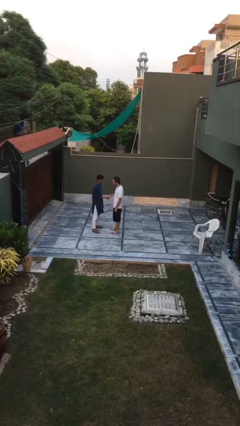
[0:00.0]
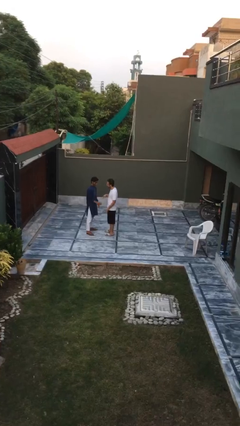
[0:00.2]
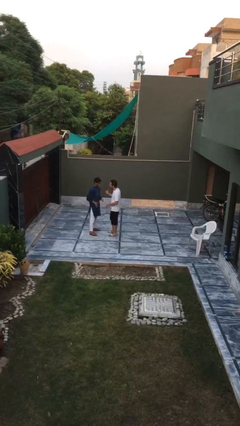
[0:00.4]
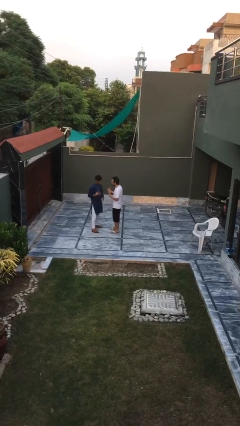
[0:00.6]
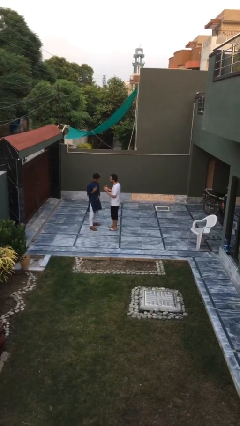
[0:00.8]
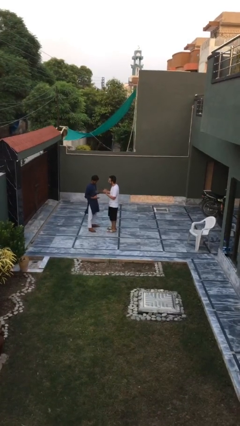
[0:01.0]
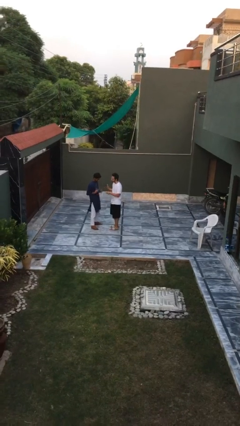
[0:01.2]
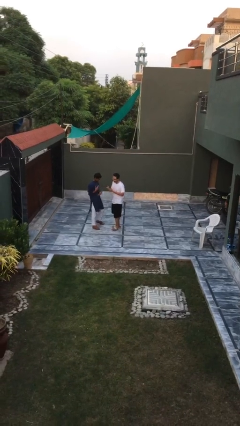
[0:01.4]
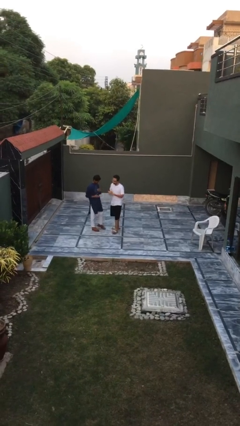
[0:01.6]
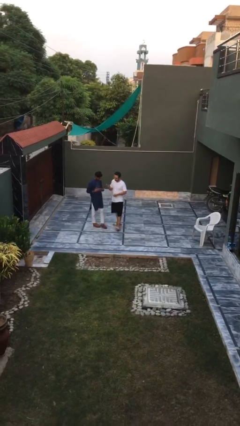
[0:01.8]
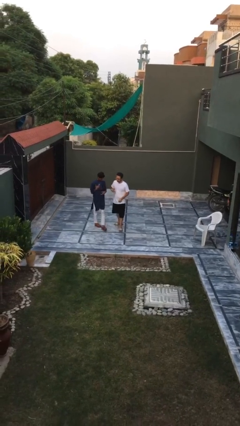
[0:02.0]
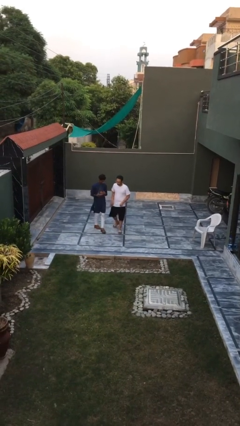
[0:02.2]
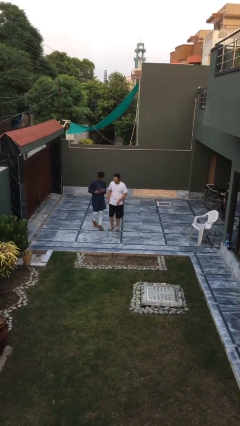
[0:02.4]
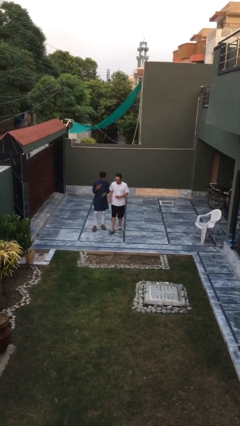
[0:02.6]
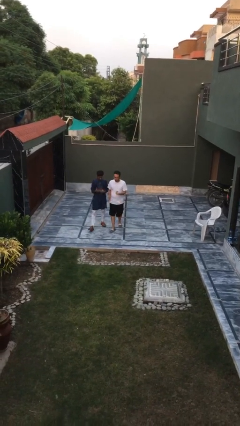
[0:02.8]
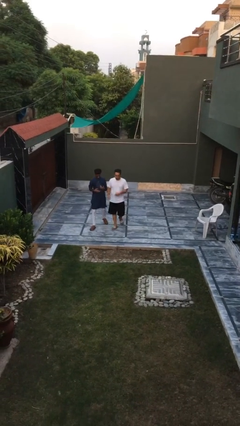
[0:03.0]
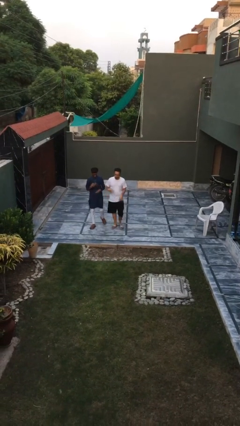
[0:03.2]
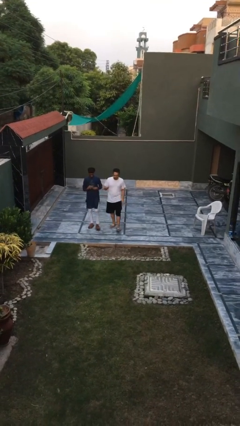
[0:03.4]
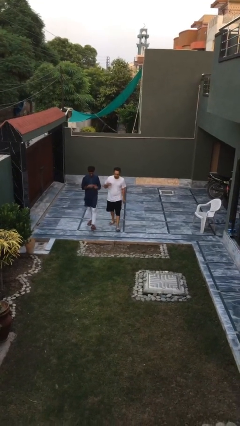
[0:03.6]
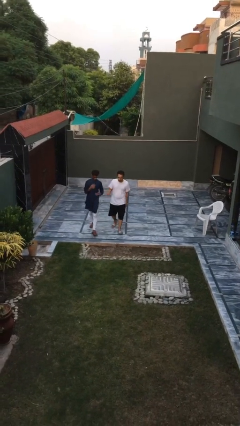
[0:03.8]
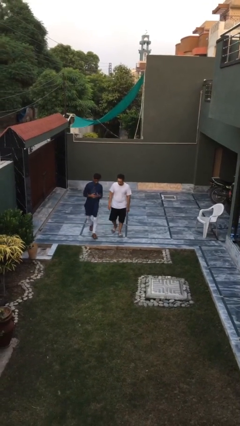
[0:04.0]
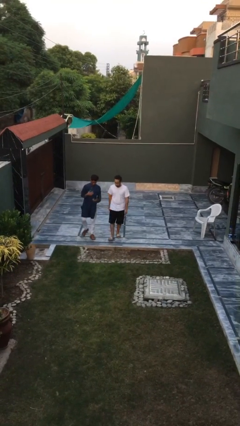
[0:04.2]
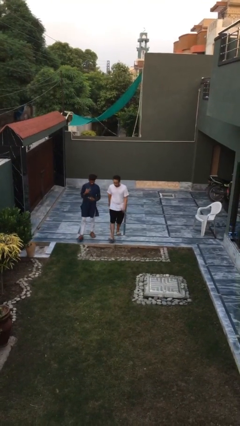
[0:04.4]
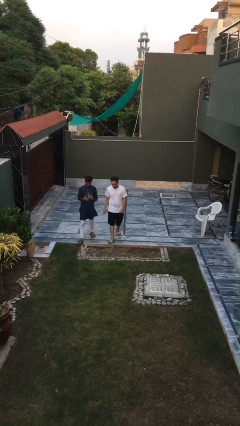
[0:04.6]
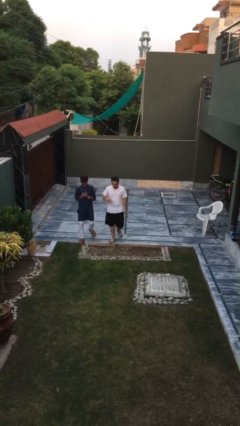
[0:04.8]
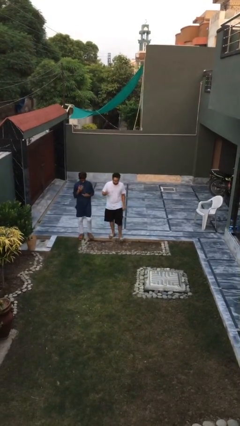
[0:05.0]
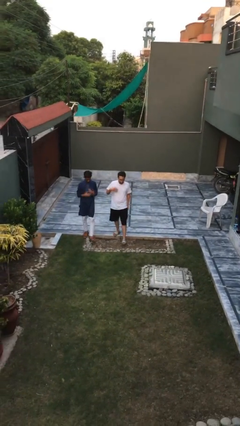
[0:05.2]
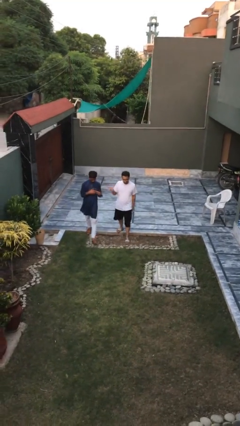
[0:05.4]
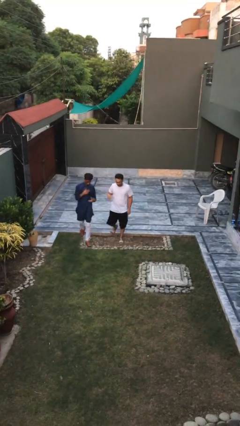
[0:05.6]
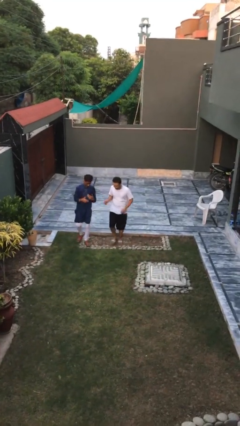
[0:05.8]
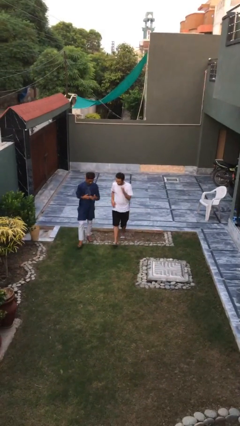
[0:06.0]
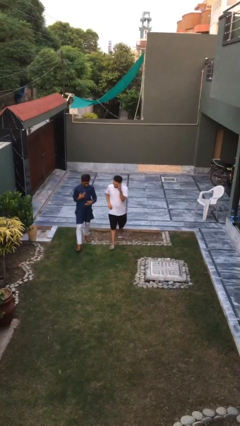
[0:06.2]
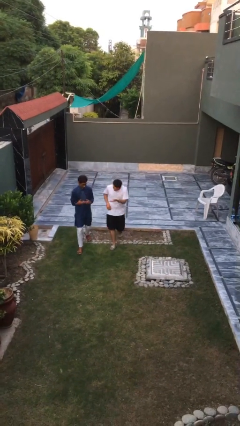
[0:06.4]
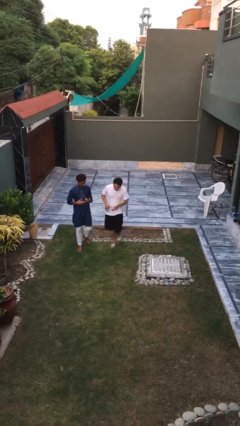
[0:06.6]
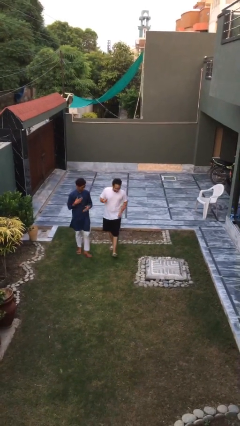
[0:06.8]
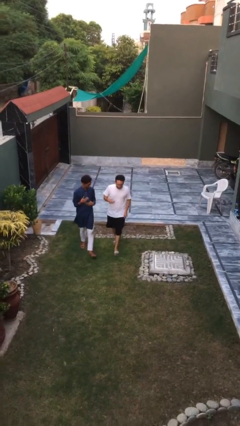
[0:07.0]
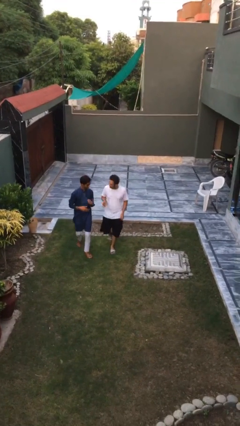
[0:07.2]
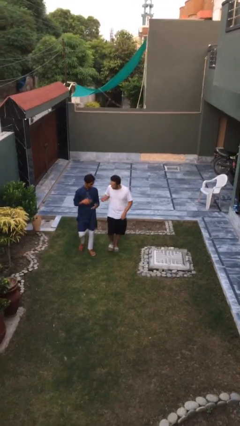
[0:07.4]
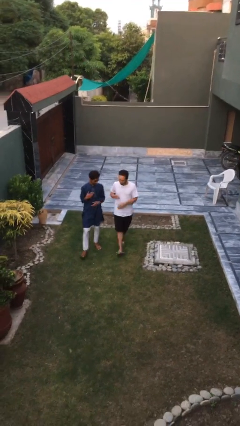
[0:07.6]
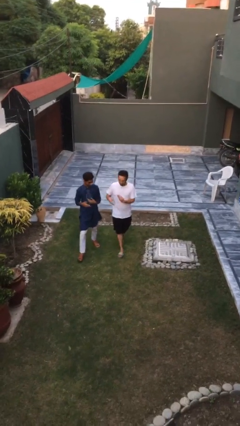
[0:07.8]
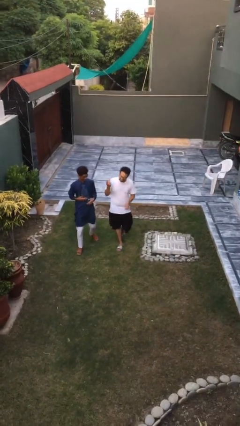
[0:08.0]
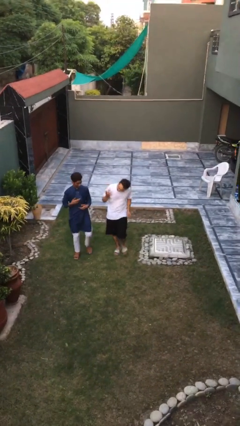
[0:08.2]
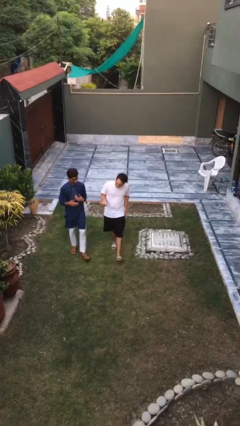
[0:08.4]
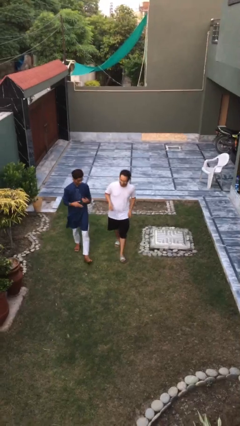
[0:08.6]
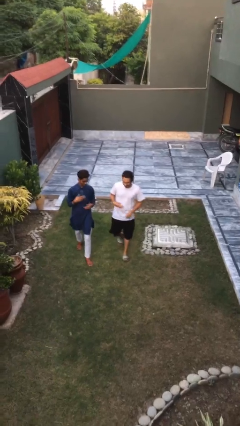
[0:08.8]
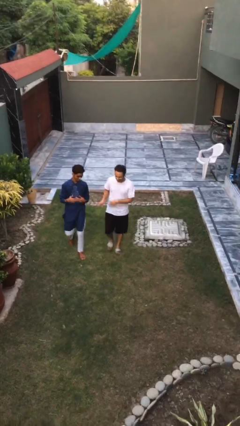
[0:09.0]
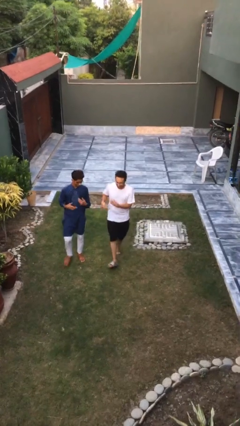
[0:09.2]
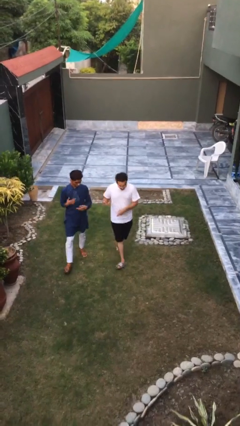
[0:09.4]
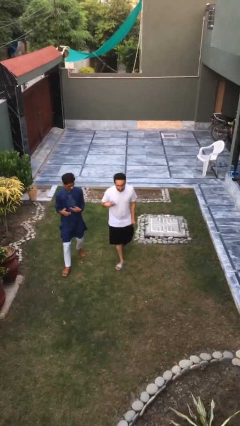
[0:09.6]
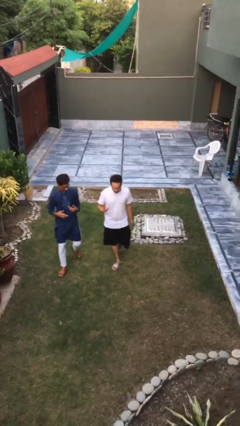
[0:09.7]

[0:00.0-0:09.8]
person talks to person

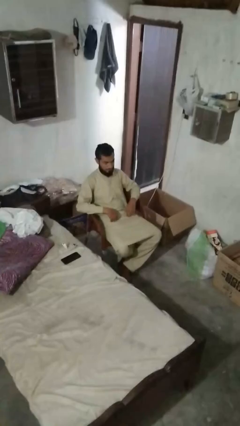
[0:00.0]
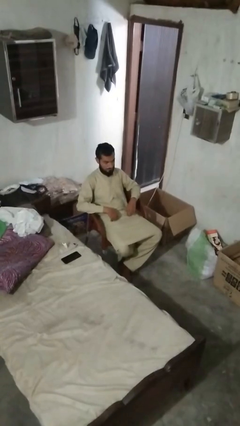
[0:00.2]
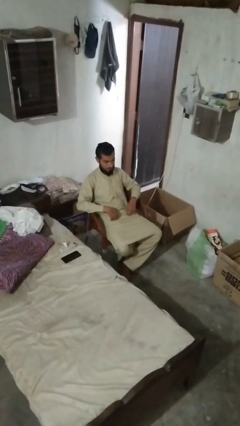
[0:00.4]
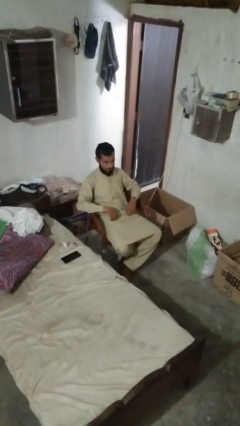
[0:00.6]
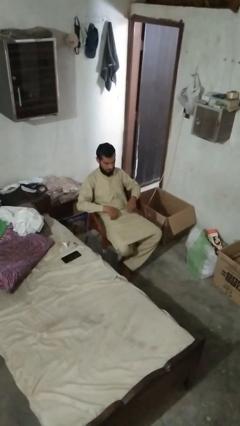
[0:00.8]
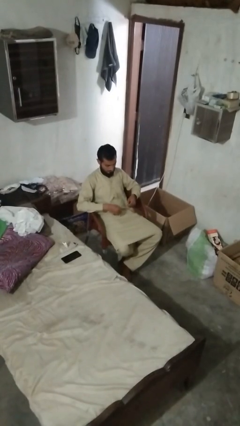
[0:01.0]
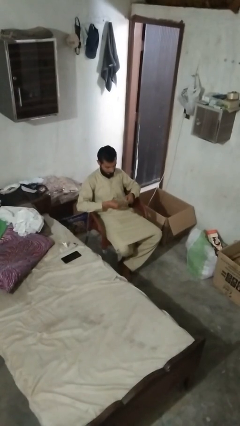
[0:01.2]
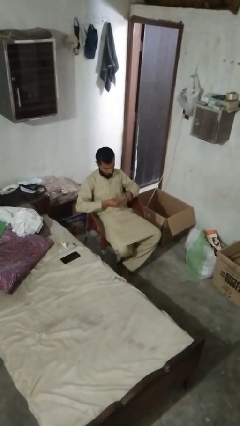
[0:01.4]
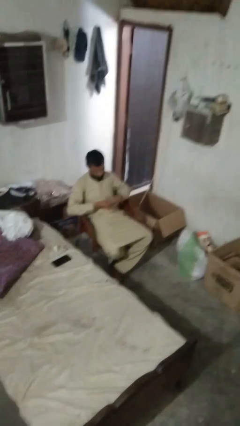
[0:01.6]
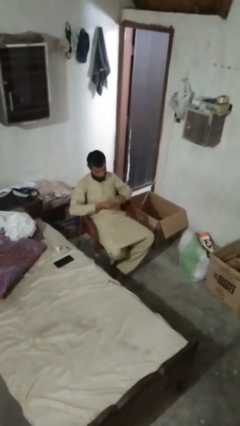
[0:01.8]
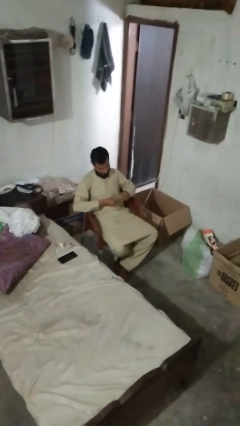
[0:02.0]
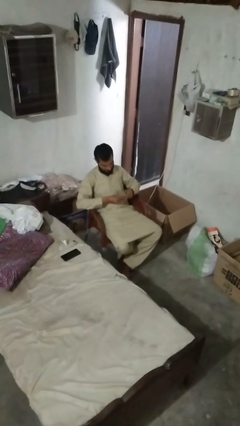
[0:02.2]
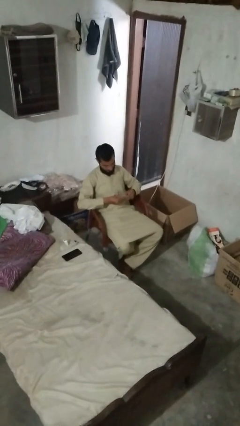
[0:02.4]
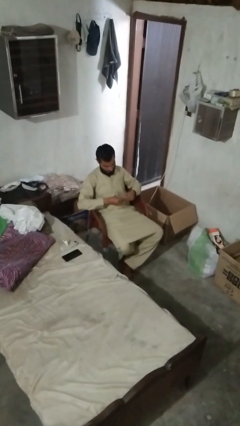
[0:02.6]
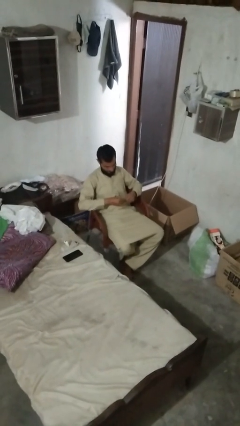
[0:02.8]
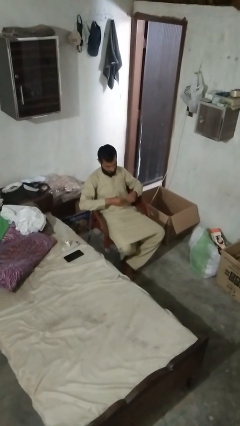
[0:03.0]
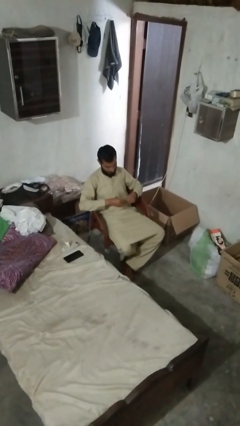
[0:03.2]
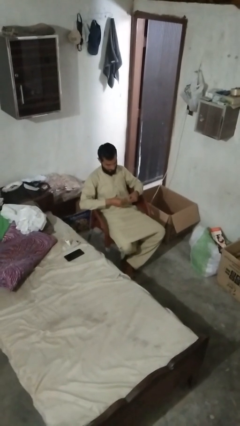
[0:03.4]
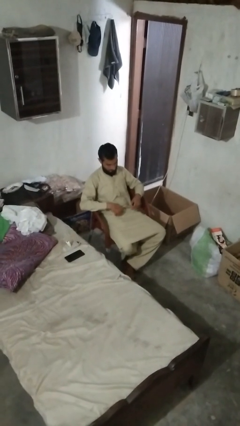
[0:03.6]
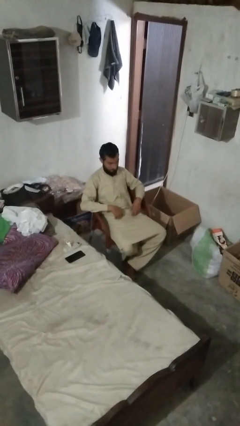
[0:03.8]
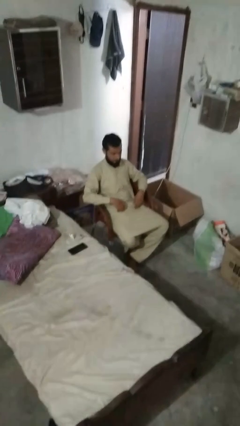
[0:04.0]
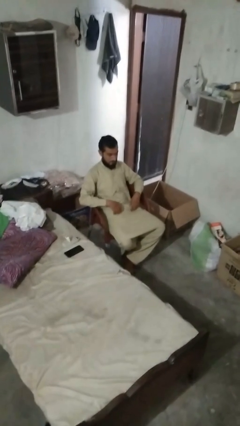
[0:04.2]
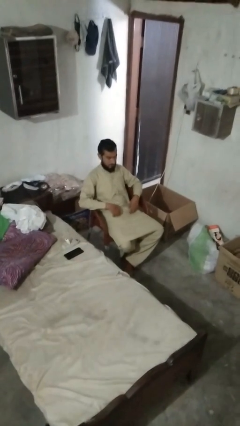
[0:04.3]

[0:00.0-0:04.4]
person clips fingernails

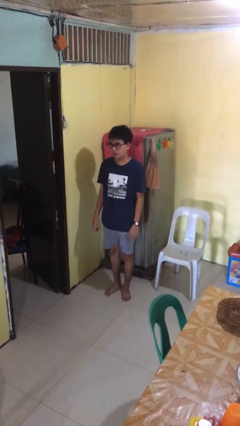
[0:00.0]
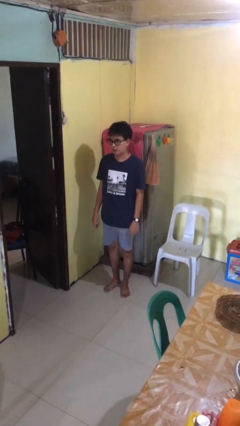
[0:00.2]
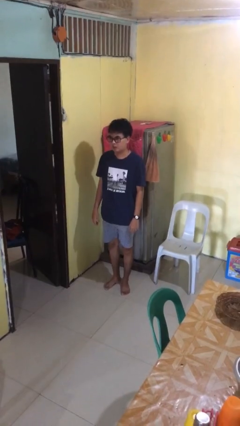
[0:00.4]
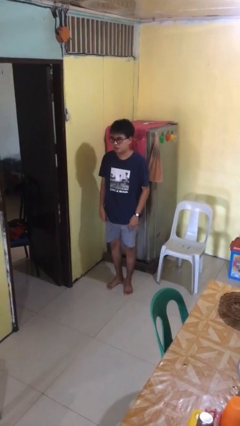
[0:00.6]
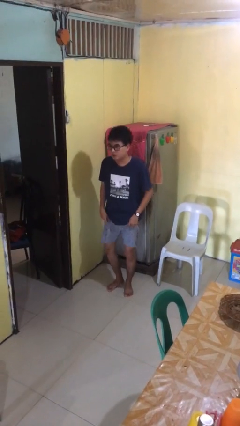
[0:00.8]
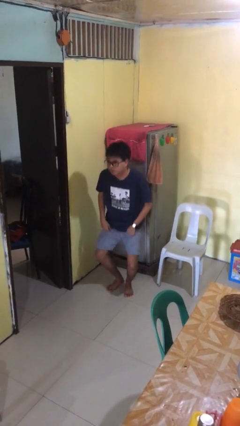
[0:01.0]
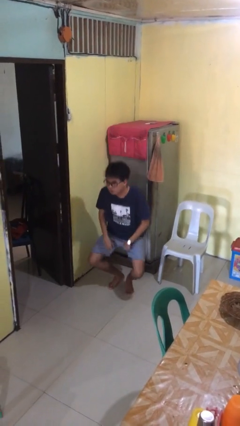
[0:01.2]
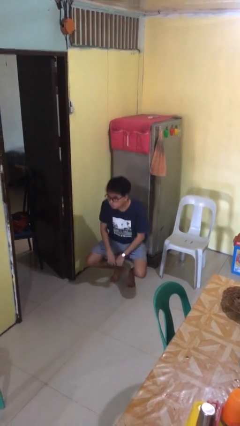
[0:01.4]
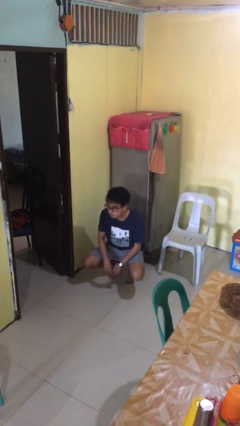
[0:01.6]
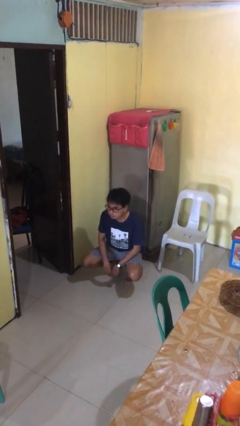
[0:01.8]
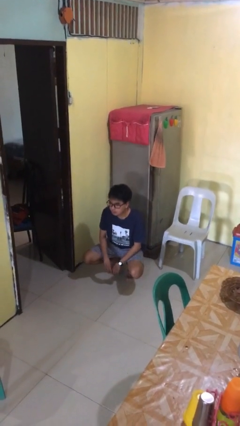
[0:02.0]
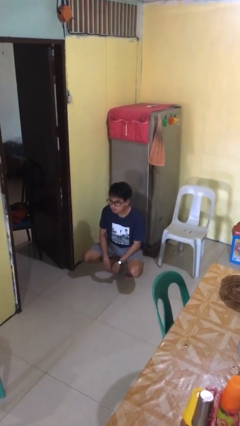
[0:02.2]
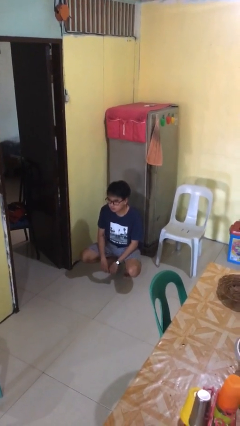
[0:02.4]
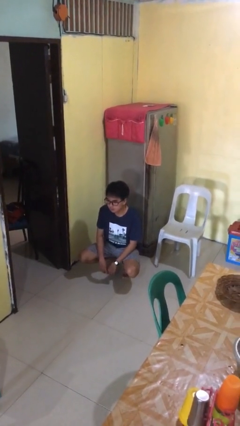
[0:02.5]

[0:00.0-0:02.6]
person squats

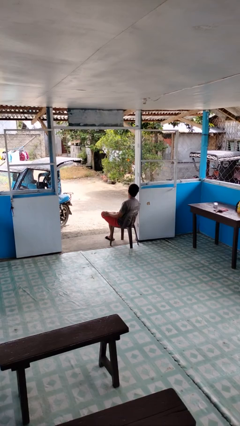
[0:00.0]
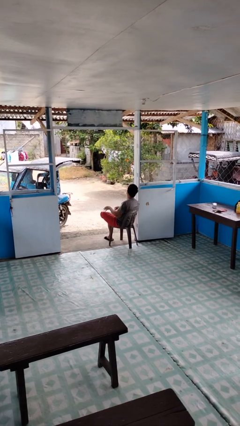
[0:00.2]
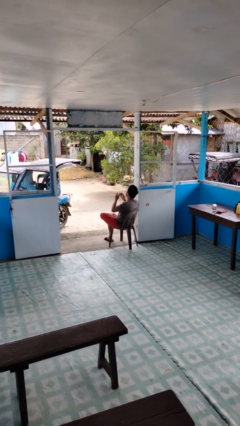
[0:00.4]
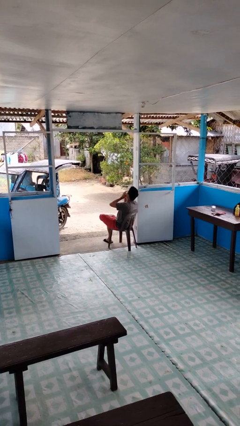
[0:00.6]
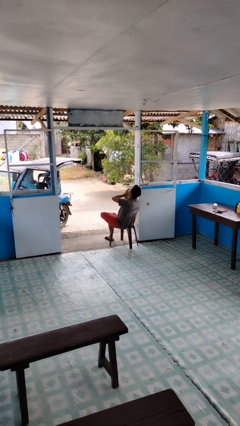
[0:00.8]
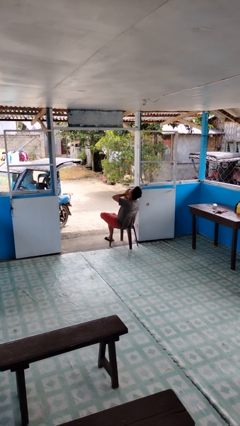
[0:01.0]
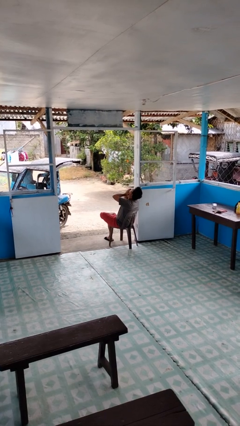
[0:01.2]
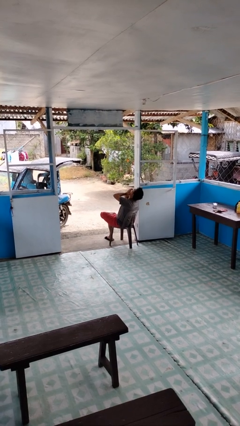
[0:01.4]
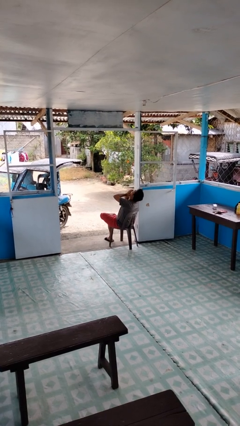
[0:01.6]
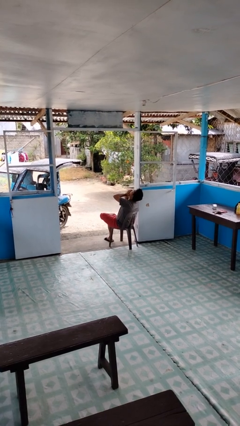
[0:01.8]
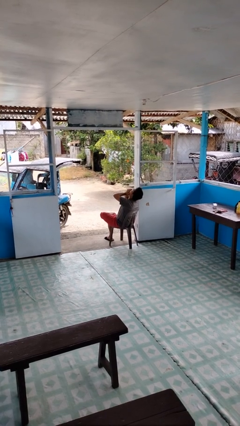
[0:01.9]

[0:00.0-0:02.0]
person yawns
